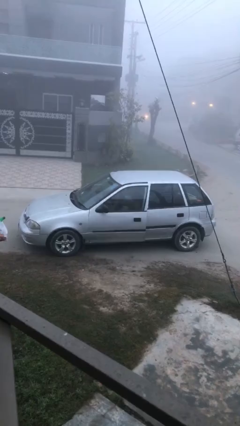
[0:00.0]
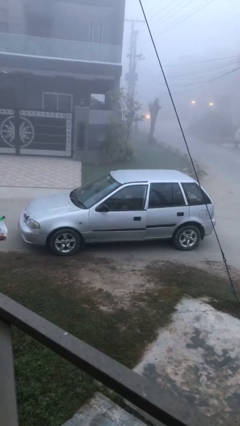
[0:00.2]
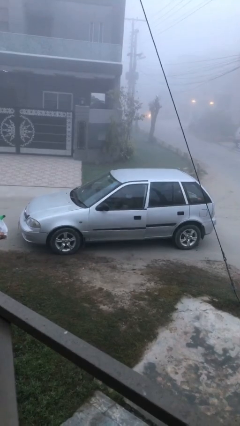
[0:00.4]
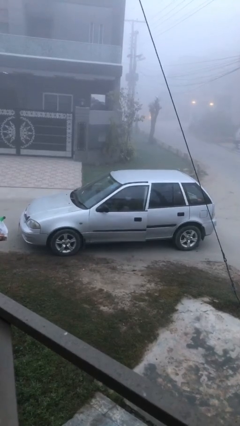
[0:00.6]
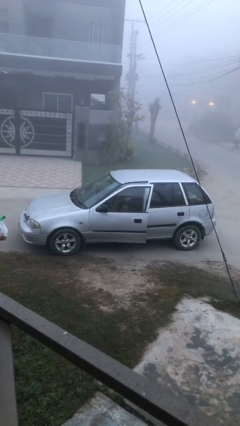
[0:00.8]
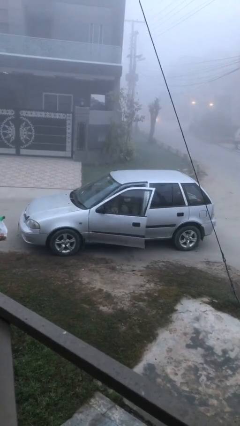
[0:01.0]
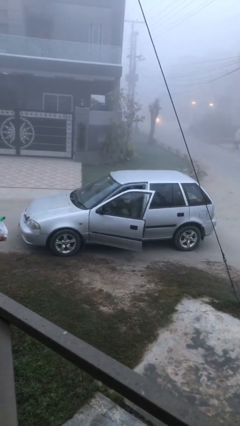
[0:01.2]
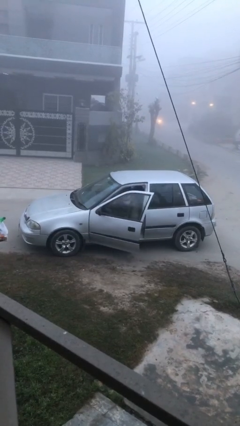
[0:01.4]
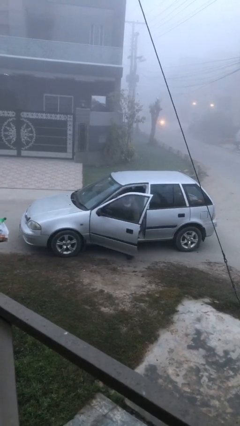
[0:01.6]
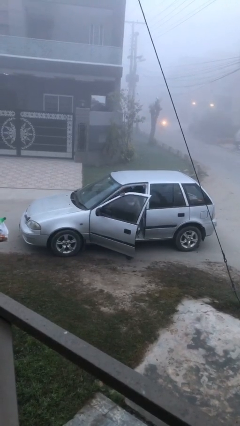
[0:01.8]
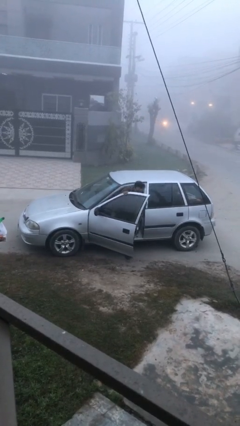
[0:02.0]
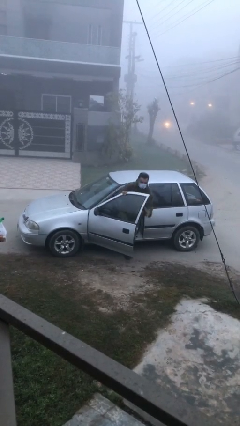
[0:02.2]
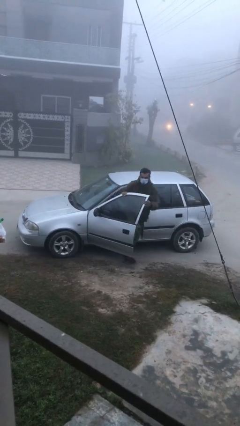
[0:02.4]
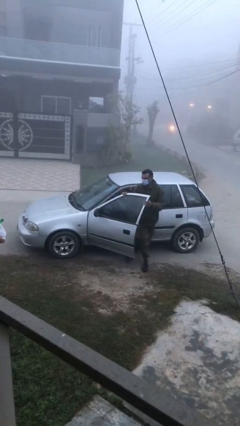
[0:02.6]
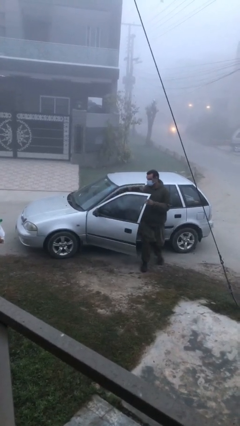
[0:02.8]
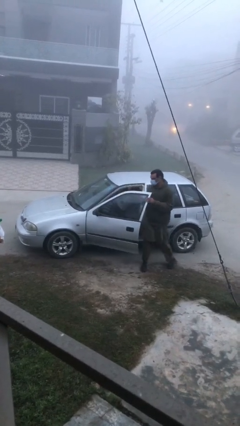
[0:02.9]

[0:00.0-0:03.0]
car drops off person

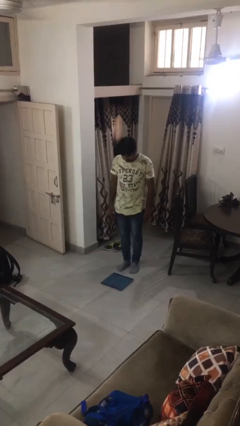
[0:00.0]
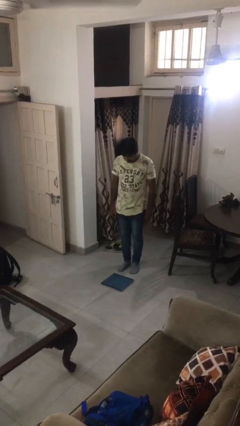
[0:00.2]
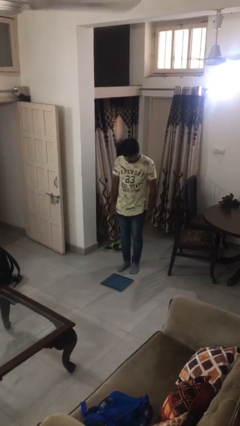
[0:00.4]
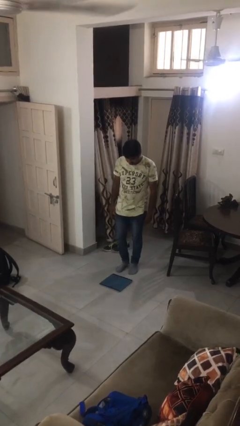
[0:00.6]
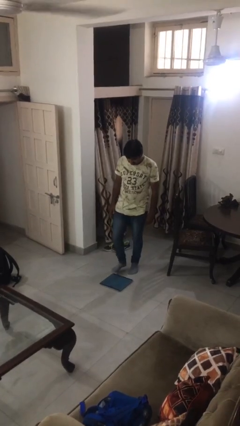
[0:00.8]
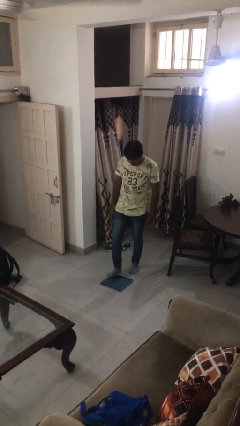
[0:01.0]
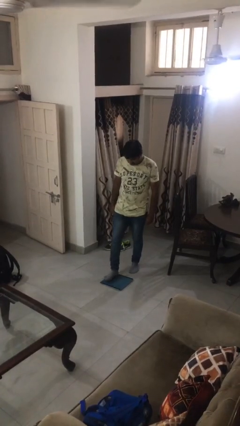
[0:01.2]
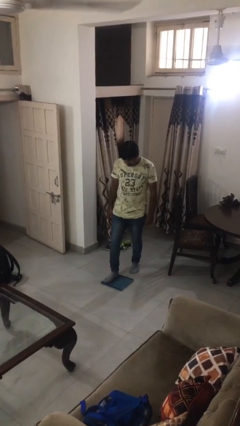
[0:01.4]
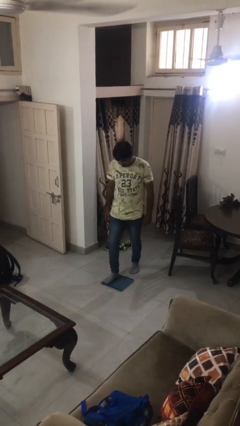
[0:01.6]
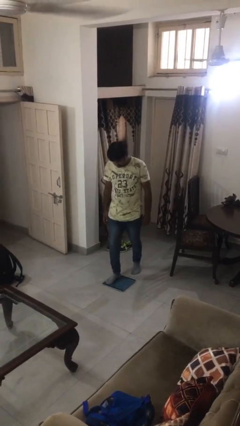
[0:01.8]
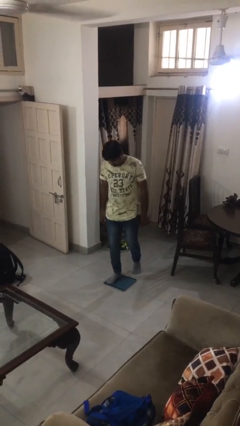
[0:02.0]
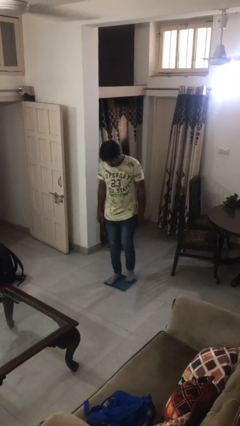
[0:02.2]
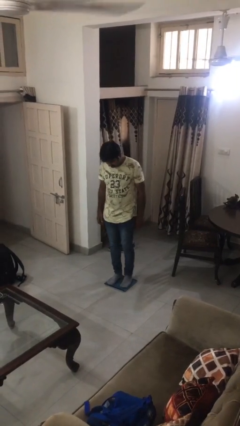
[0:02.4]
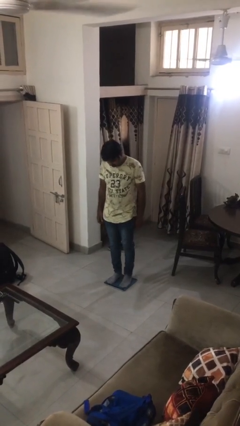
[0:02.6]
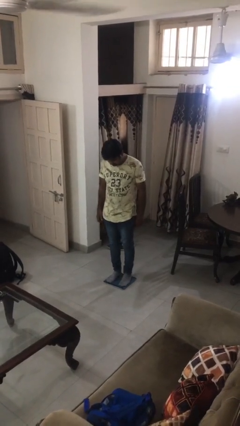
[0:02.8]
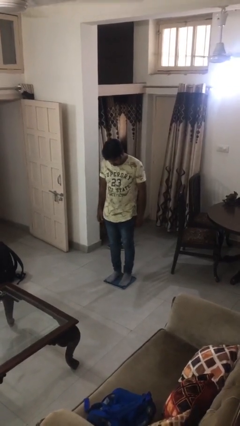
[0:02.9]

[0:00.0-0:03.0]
person uses bodyweight scale

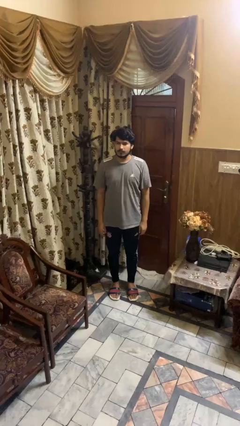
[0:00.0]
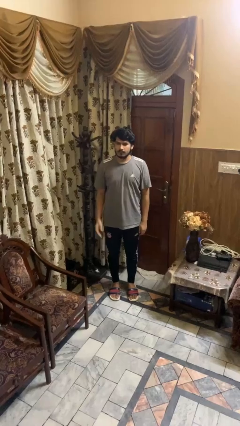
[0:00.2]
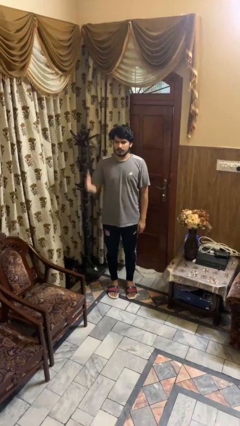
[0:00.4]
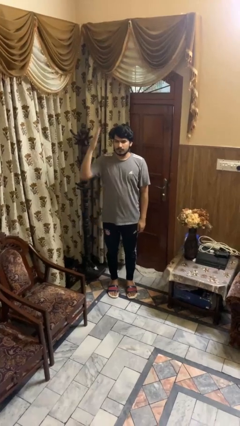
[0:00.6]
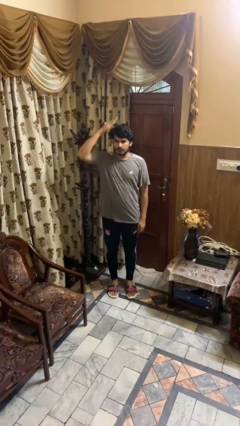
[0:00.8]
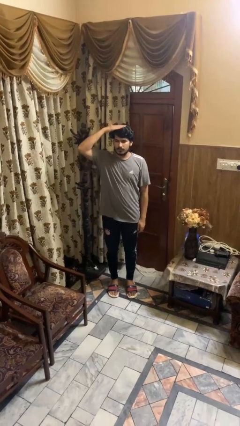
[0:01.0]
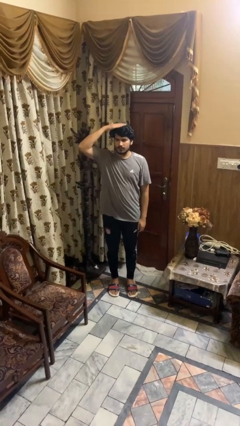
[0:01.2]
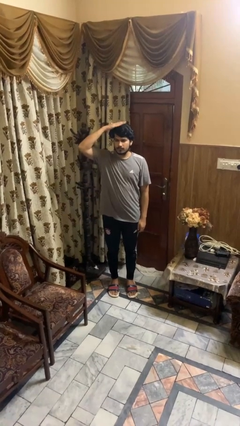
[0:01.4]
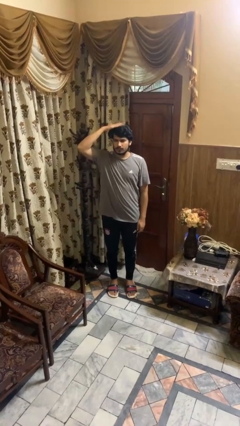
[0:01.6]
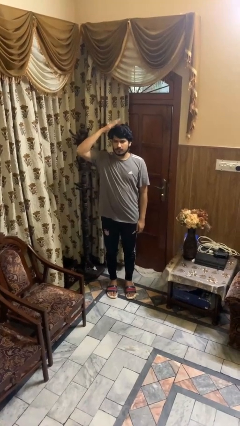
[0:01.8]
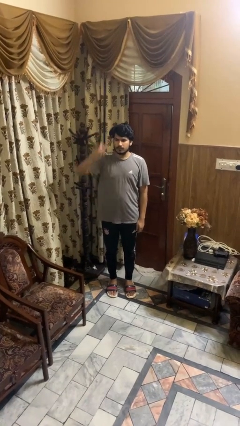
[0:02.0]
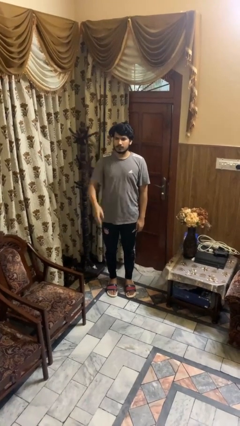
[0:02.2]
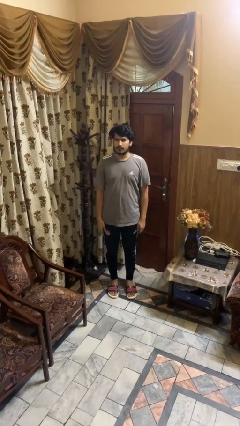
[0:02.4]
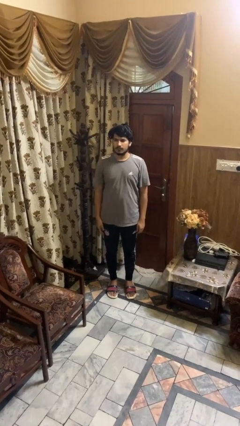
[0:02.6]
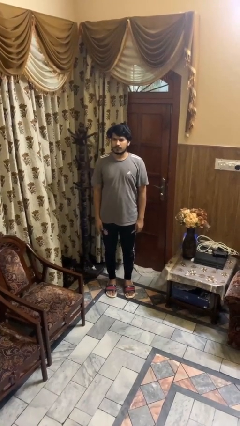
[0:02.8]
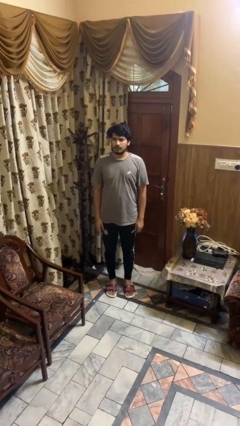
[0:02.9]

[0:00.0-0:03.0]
person pats head

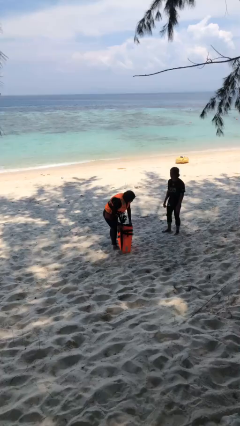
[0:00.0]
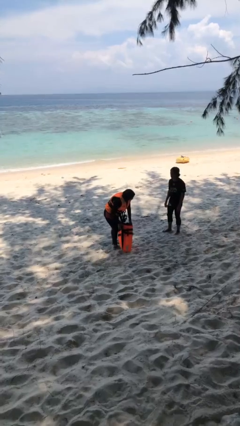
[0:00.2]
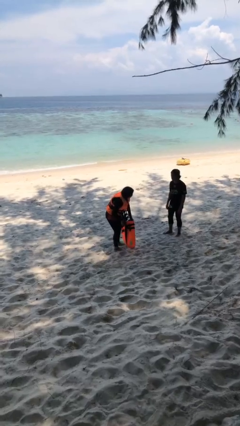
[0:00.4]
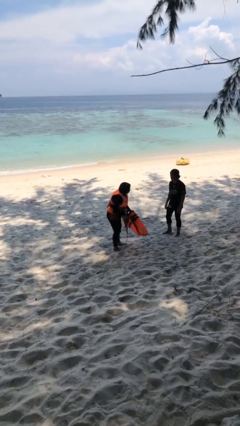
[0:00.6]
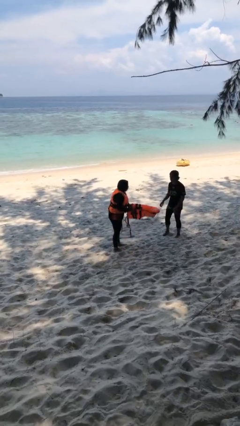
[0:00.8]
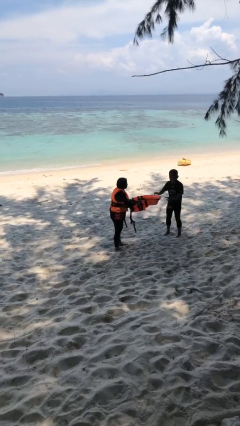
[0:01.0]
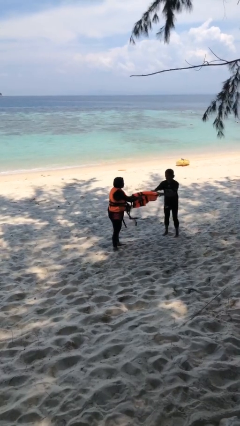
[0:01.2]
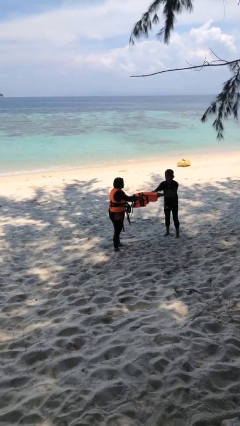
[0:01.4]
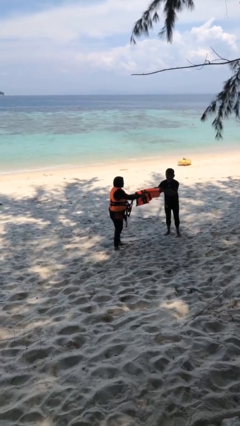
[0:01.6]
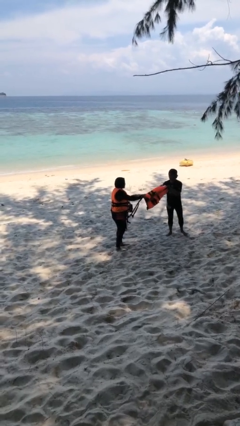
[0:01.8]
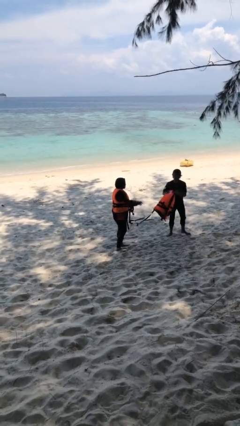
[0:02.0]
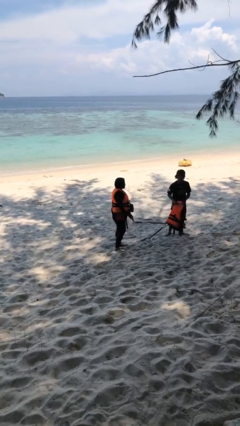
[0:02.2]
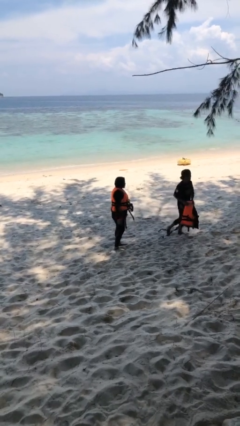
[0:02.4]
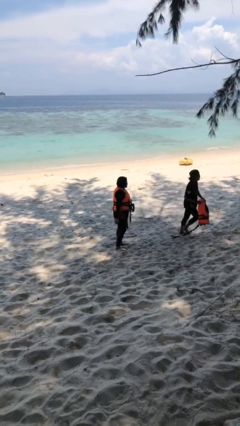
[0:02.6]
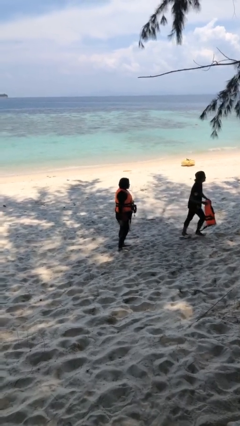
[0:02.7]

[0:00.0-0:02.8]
person transfers object to person

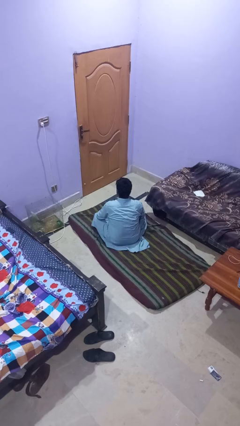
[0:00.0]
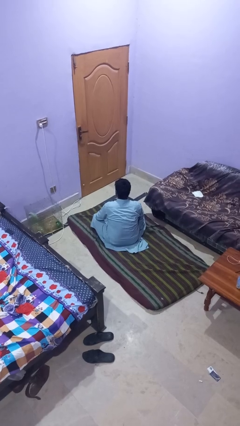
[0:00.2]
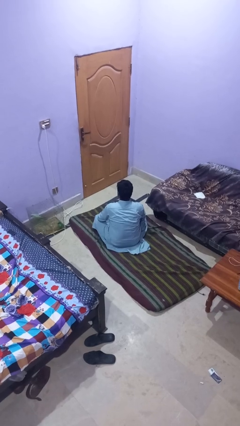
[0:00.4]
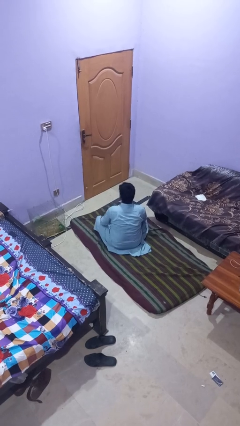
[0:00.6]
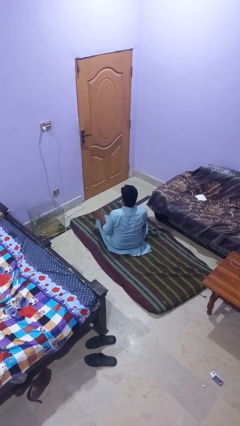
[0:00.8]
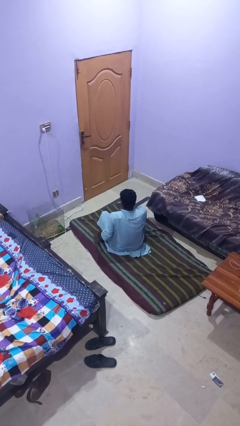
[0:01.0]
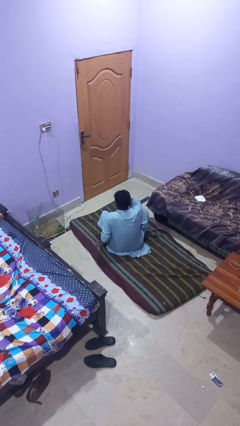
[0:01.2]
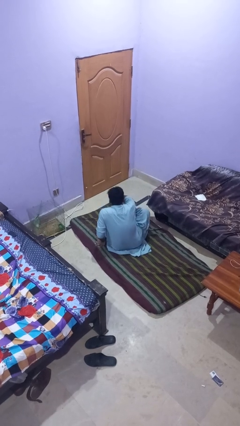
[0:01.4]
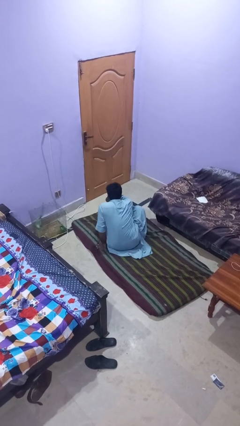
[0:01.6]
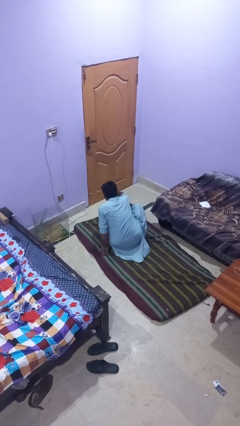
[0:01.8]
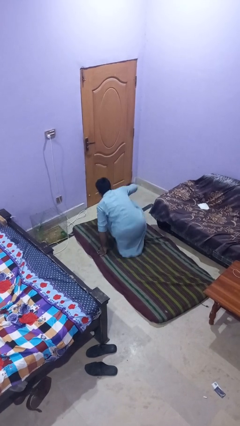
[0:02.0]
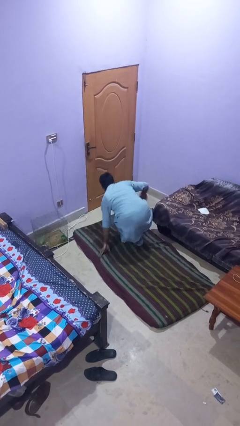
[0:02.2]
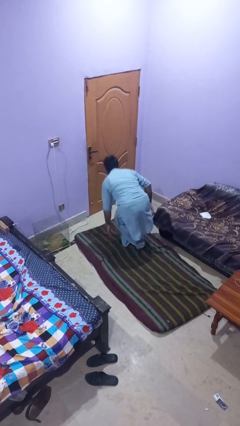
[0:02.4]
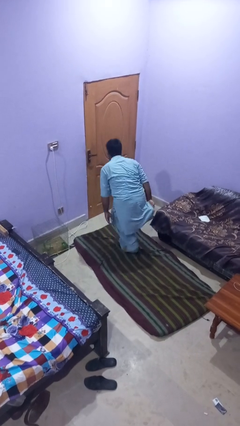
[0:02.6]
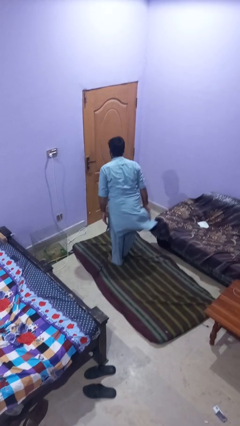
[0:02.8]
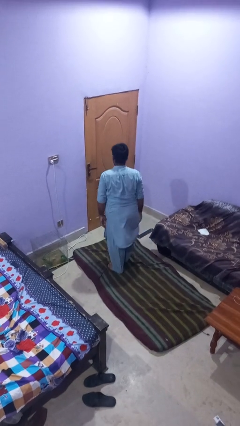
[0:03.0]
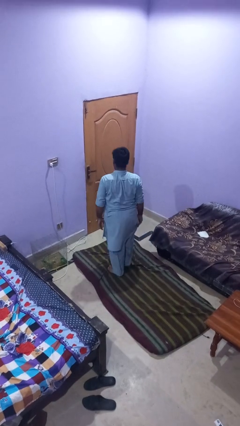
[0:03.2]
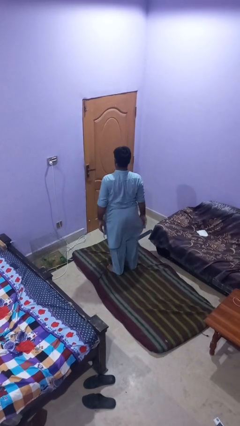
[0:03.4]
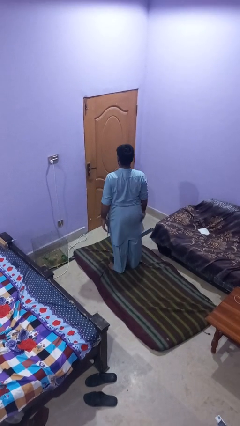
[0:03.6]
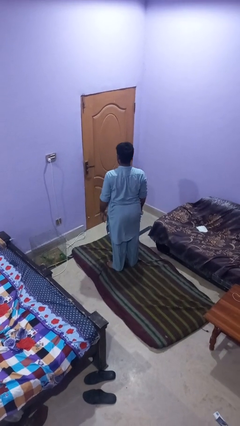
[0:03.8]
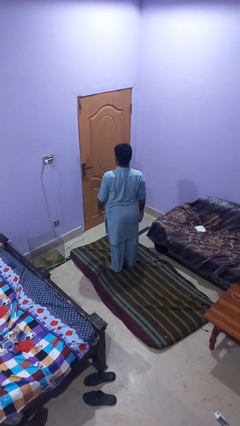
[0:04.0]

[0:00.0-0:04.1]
person stands up from floor

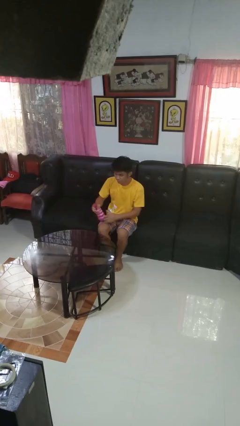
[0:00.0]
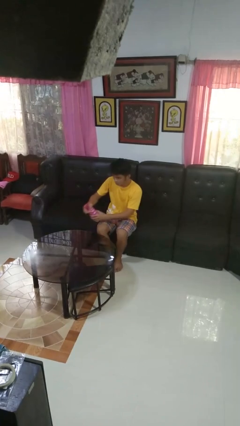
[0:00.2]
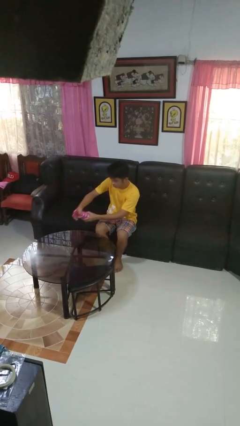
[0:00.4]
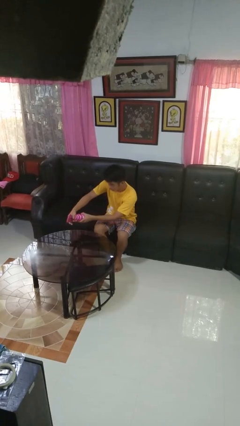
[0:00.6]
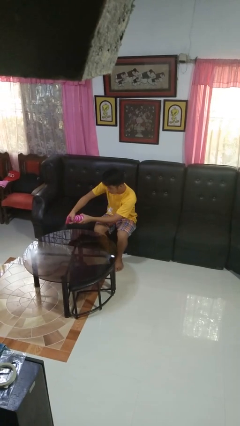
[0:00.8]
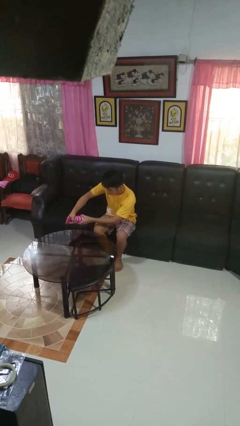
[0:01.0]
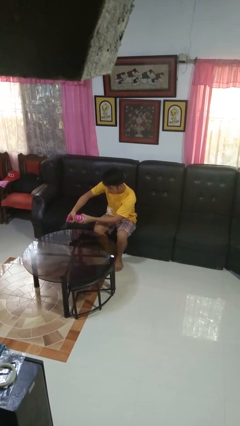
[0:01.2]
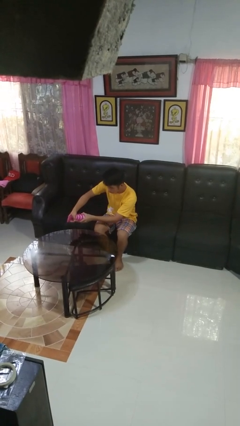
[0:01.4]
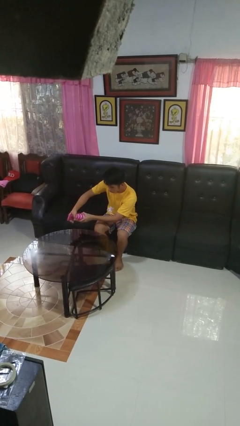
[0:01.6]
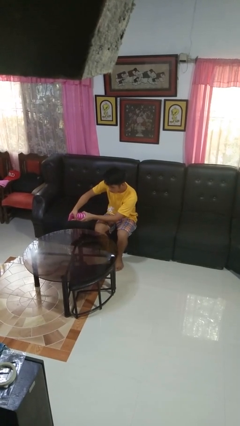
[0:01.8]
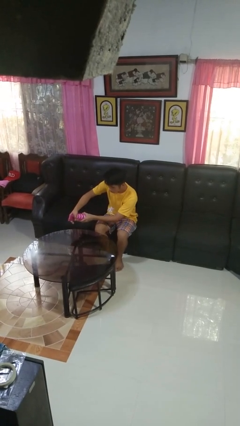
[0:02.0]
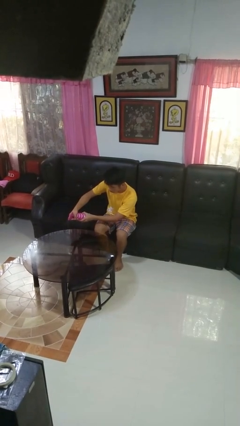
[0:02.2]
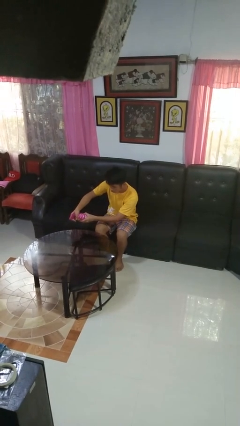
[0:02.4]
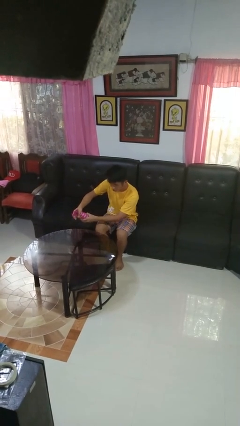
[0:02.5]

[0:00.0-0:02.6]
person sprays from bottle
